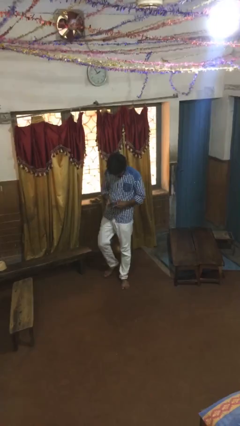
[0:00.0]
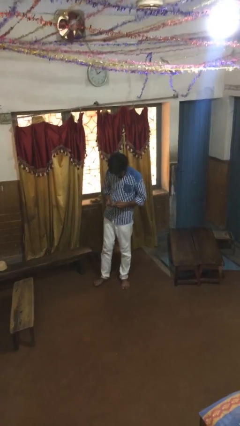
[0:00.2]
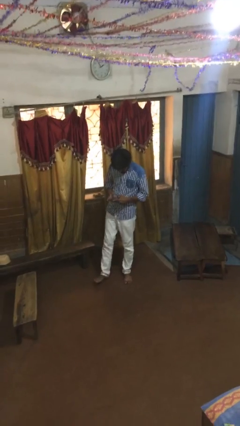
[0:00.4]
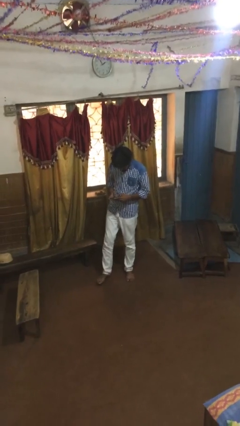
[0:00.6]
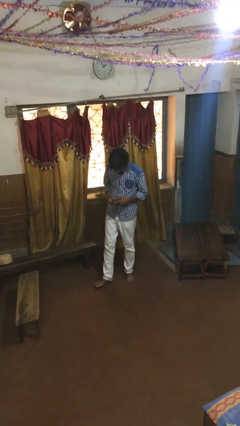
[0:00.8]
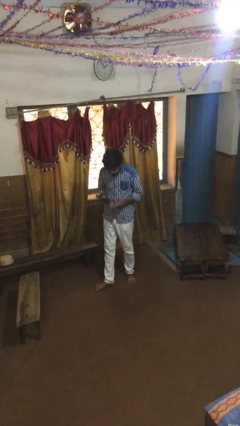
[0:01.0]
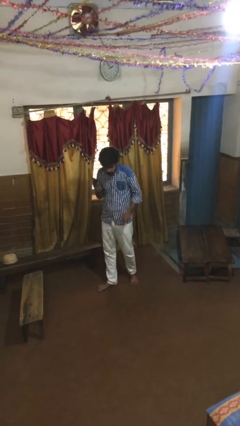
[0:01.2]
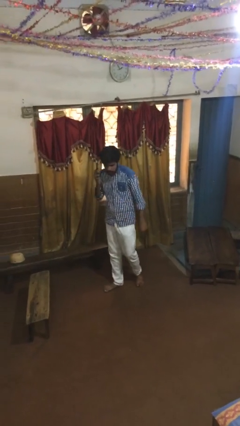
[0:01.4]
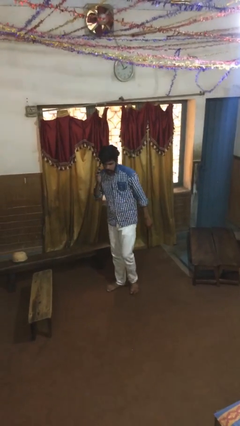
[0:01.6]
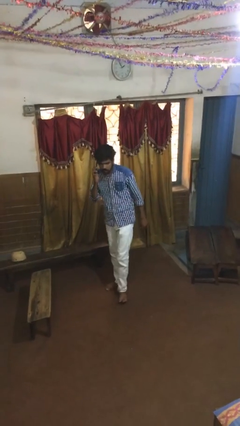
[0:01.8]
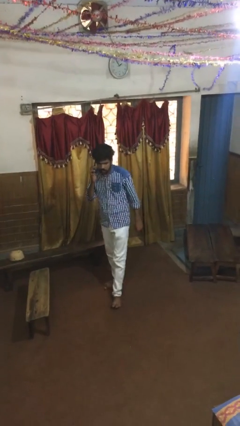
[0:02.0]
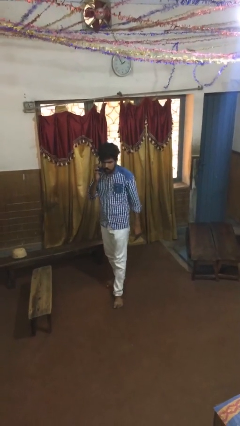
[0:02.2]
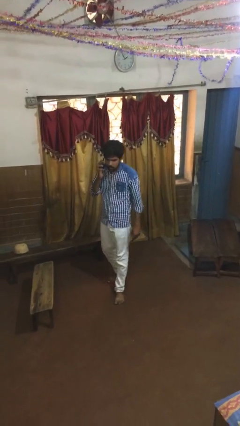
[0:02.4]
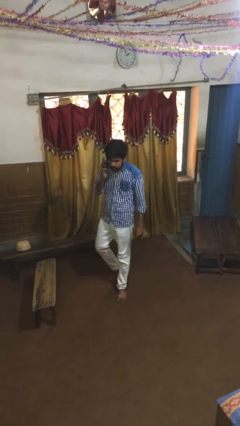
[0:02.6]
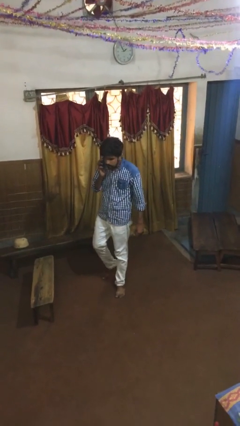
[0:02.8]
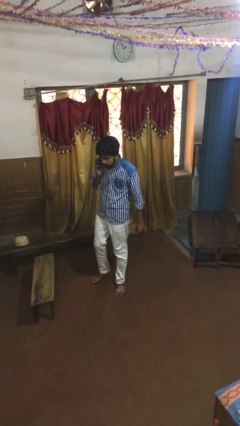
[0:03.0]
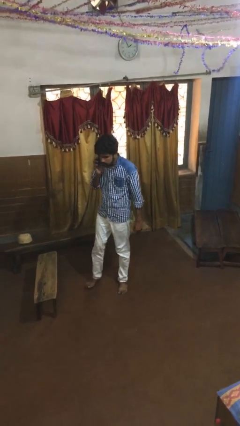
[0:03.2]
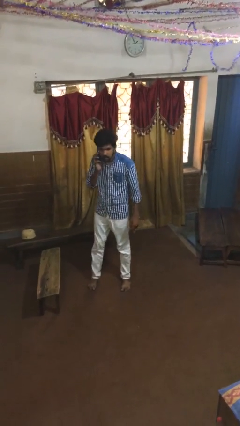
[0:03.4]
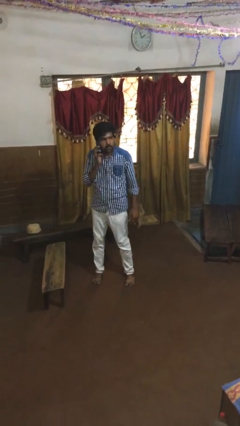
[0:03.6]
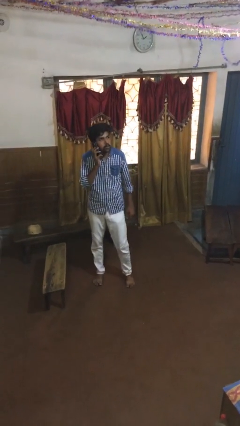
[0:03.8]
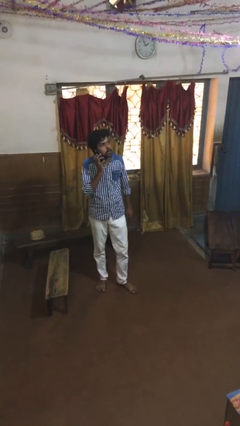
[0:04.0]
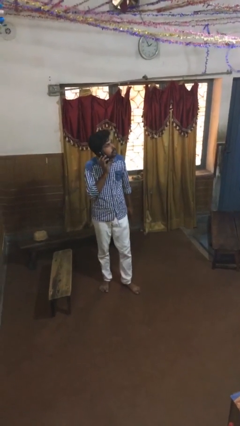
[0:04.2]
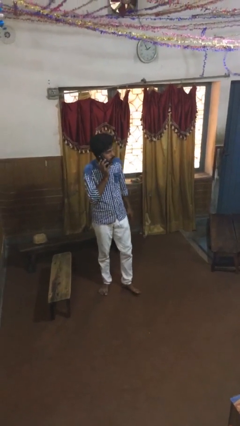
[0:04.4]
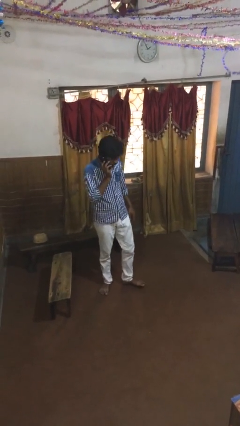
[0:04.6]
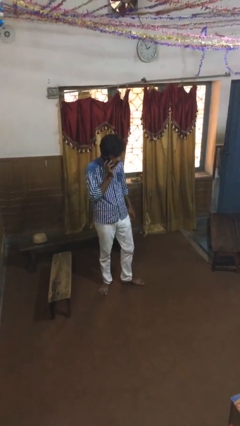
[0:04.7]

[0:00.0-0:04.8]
person talks on phone

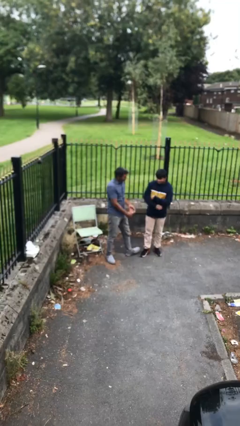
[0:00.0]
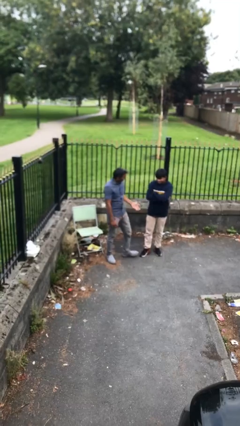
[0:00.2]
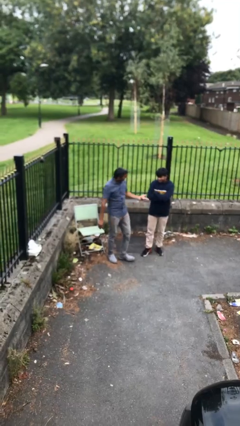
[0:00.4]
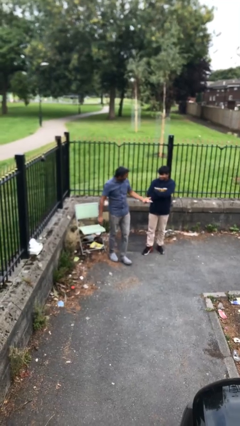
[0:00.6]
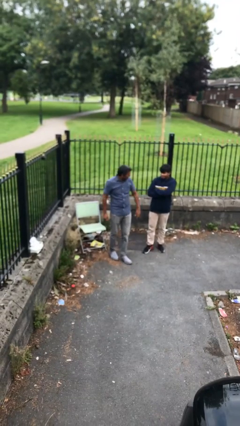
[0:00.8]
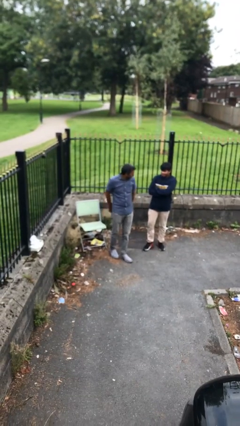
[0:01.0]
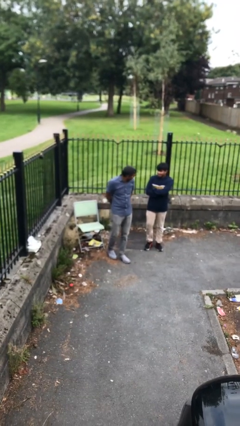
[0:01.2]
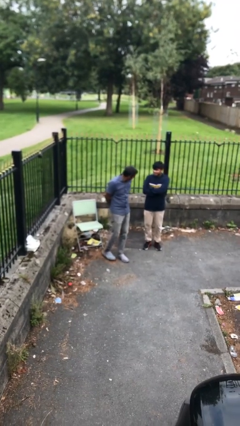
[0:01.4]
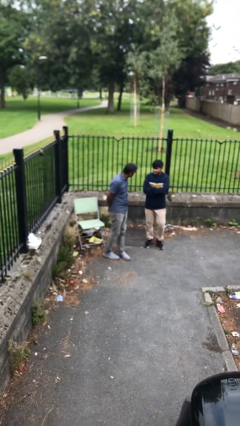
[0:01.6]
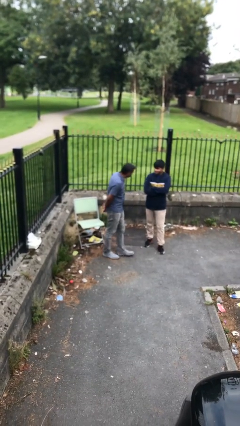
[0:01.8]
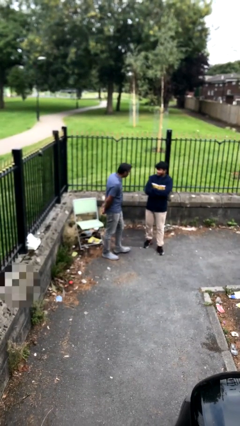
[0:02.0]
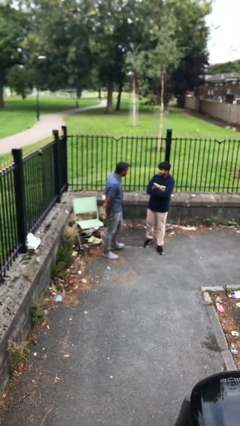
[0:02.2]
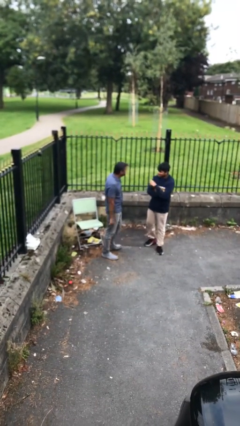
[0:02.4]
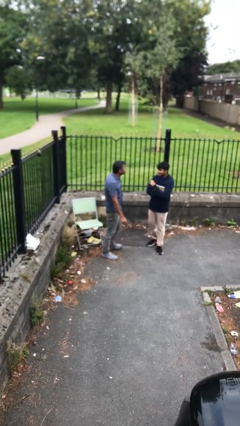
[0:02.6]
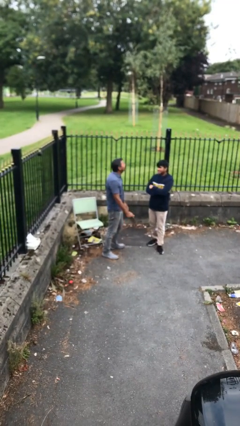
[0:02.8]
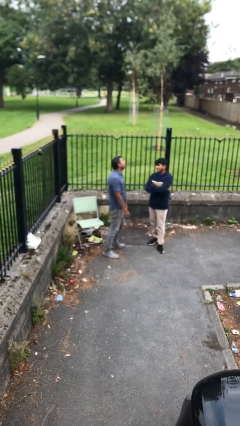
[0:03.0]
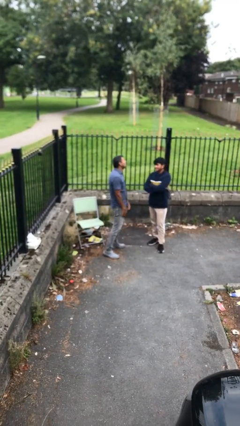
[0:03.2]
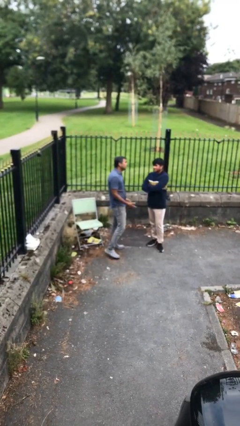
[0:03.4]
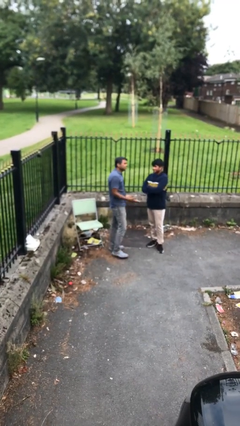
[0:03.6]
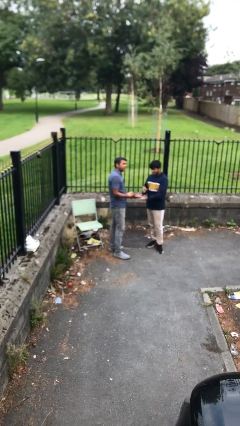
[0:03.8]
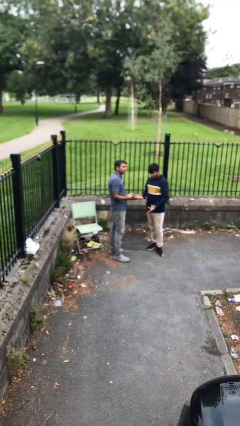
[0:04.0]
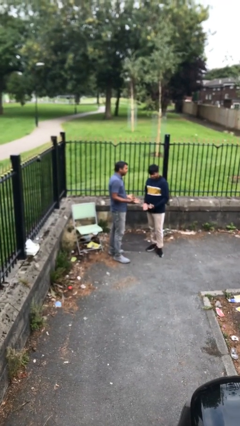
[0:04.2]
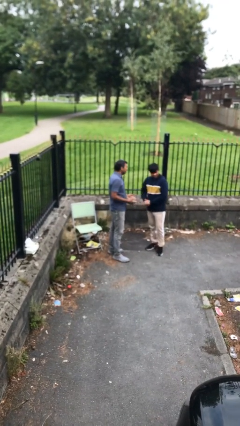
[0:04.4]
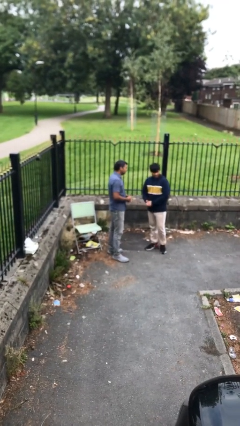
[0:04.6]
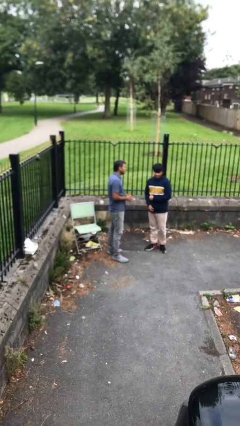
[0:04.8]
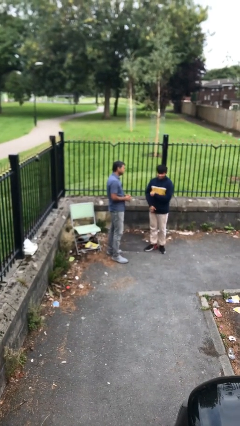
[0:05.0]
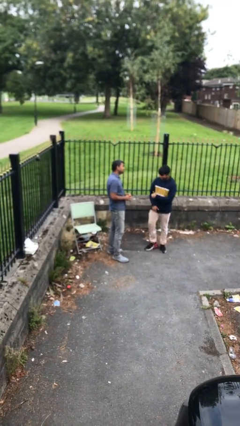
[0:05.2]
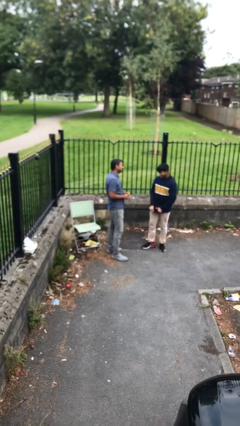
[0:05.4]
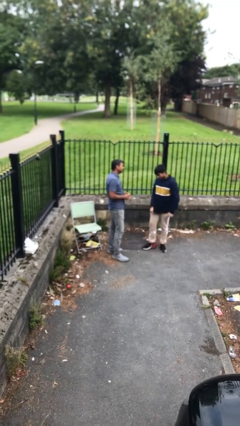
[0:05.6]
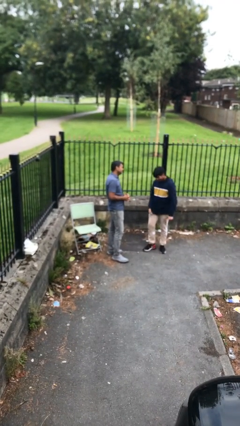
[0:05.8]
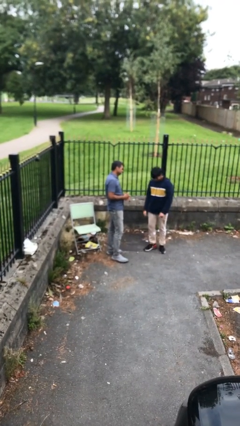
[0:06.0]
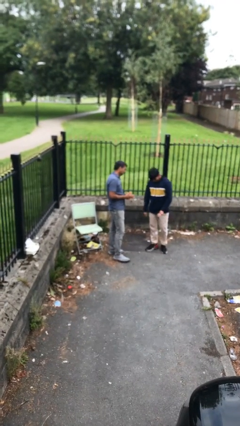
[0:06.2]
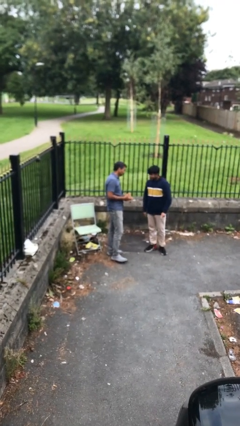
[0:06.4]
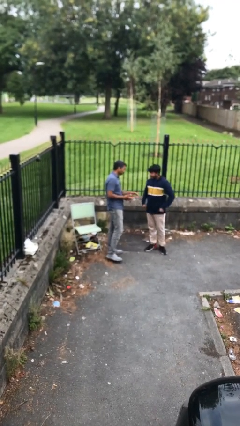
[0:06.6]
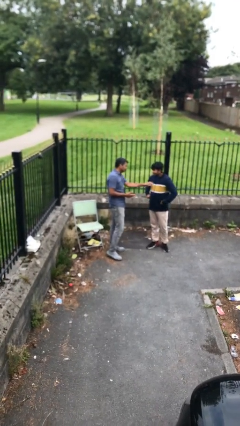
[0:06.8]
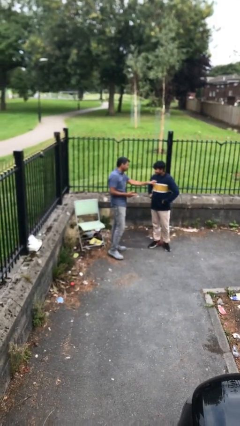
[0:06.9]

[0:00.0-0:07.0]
person talks to person

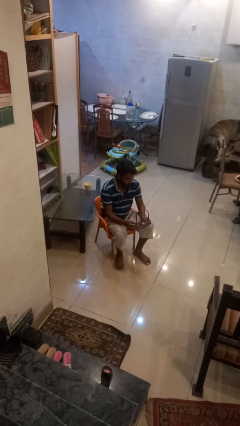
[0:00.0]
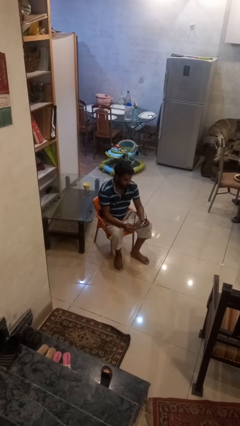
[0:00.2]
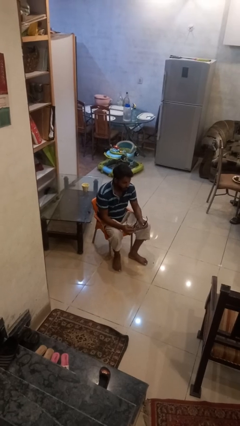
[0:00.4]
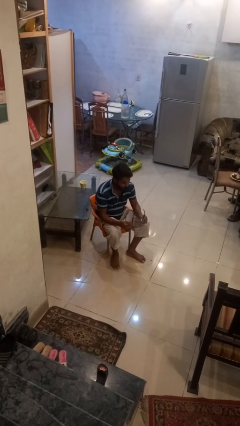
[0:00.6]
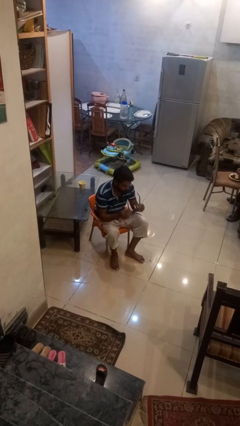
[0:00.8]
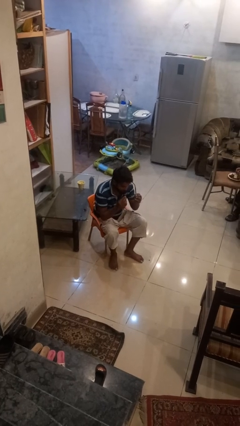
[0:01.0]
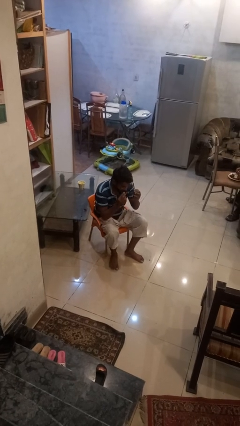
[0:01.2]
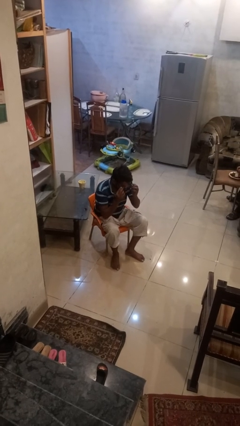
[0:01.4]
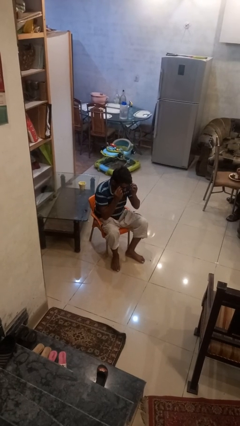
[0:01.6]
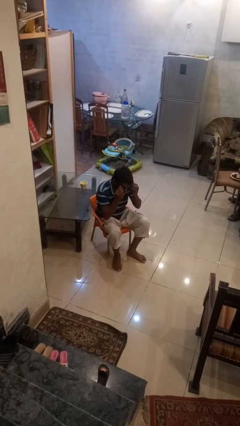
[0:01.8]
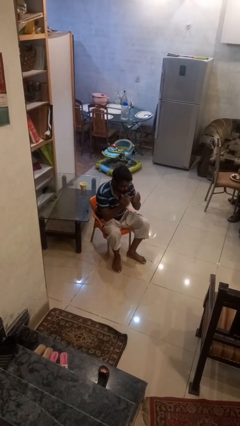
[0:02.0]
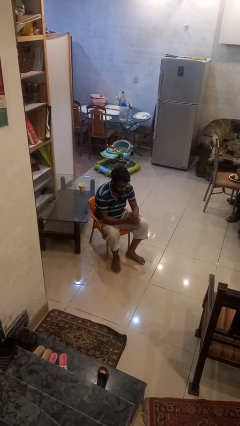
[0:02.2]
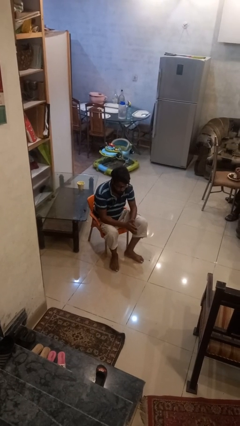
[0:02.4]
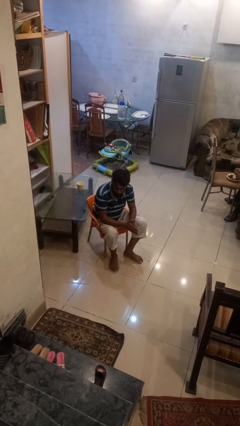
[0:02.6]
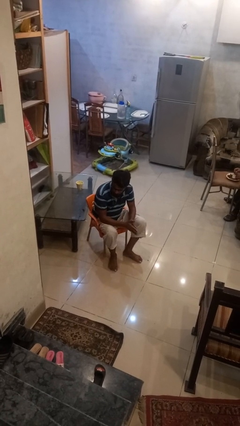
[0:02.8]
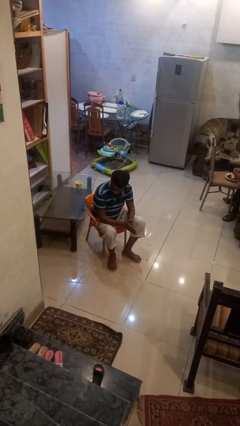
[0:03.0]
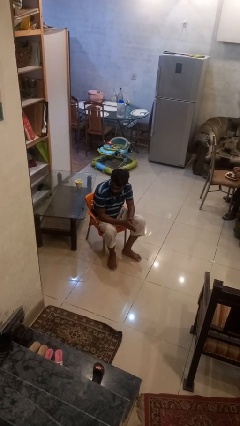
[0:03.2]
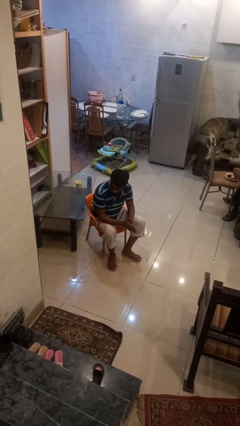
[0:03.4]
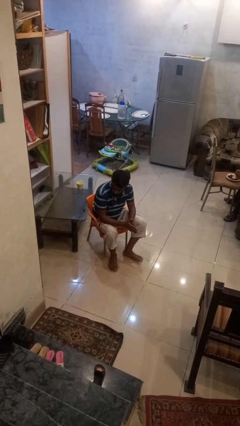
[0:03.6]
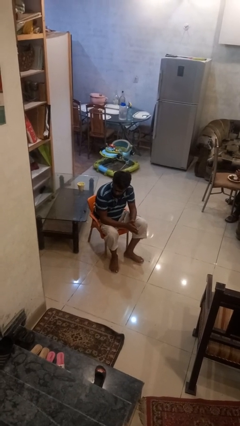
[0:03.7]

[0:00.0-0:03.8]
person puts on glasses

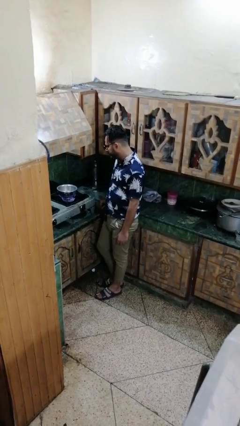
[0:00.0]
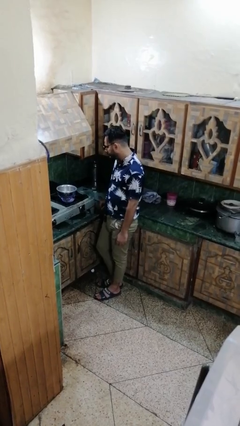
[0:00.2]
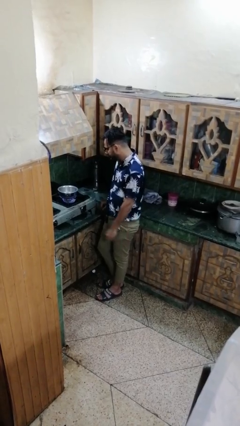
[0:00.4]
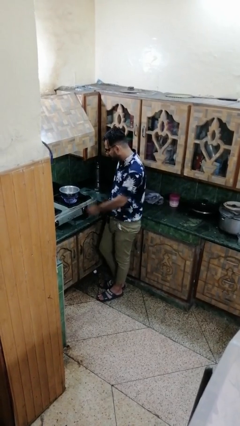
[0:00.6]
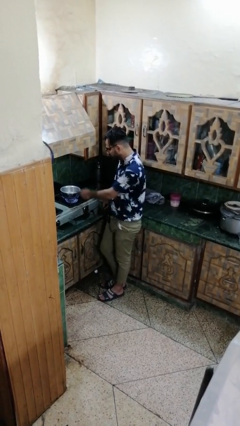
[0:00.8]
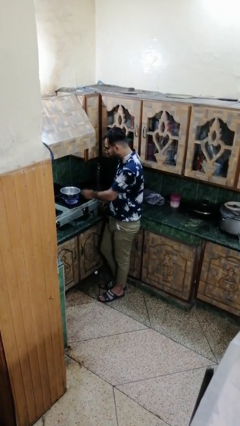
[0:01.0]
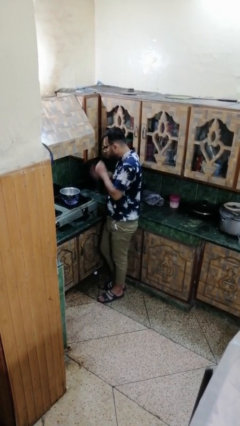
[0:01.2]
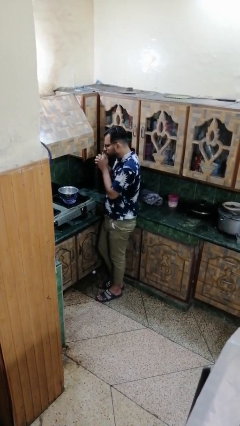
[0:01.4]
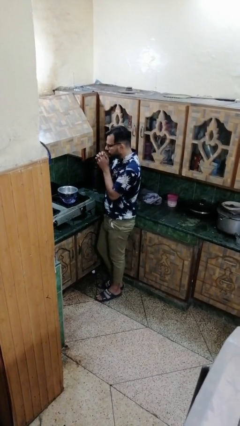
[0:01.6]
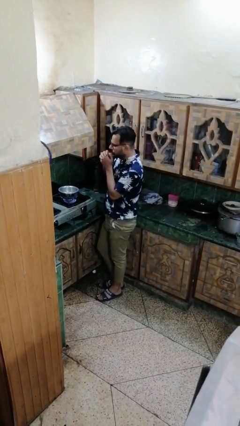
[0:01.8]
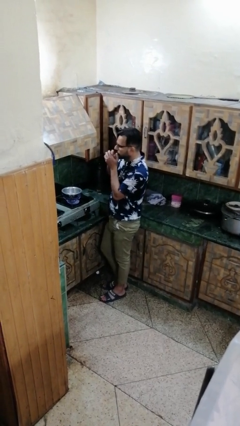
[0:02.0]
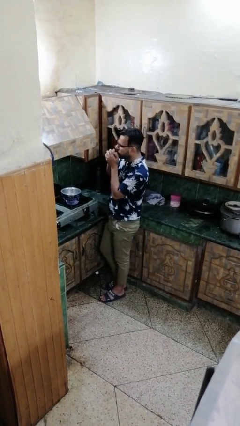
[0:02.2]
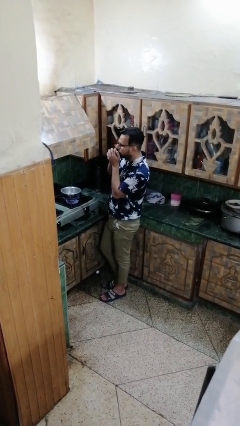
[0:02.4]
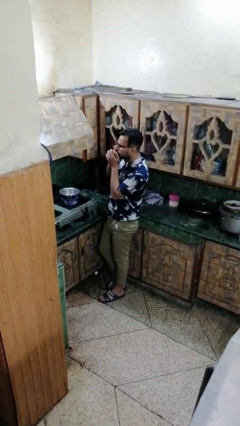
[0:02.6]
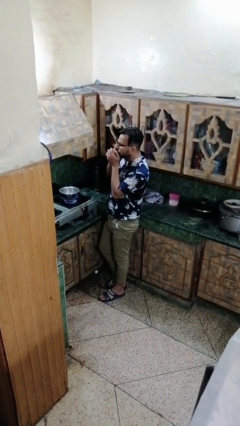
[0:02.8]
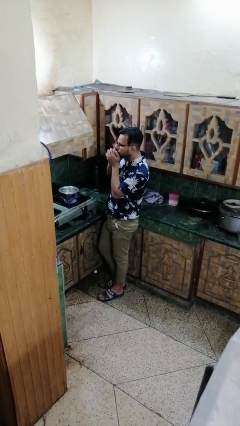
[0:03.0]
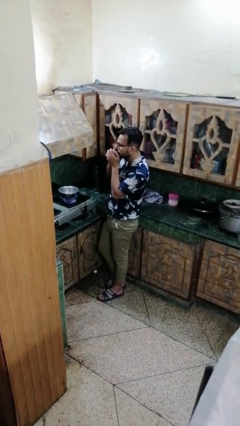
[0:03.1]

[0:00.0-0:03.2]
person burns hand
